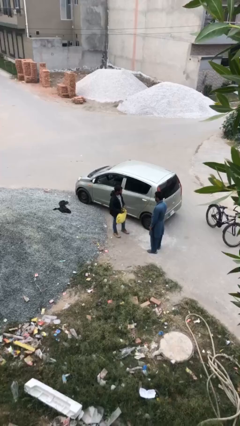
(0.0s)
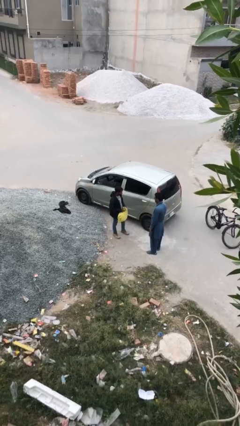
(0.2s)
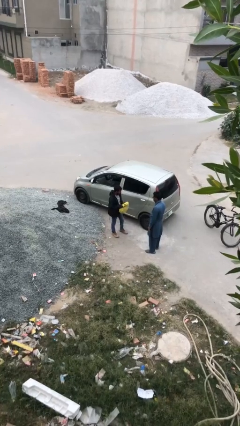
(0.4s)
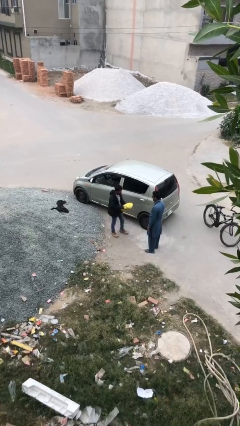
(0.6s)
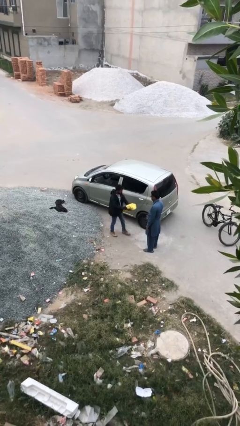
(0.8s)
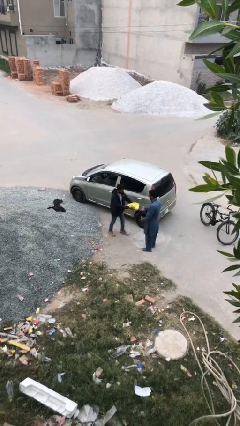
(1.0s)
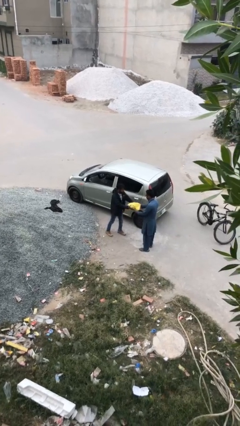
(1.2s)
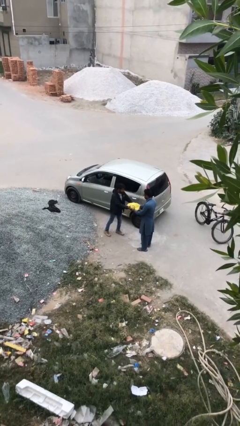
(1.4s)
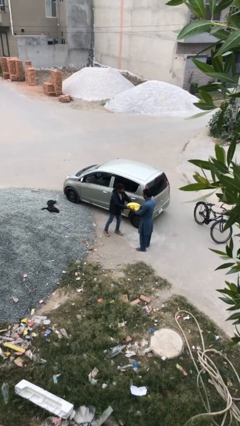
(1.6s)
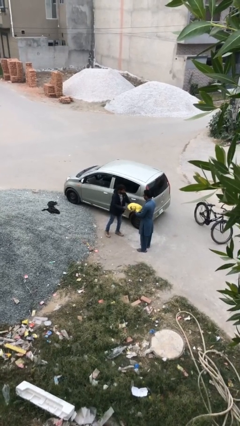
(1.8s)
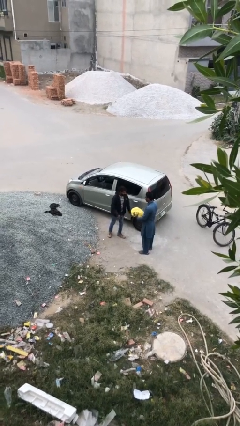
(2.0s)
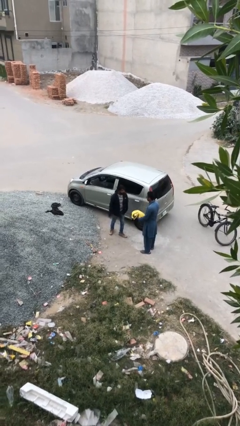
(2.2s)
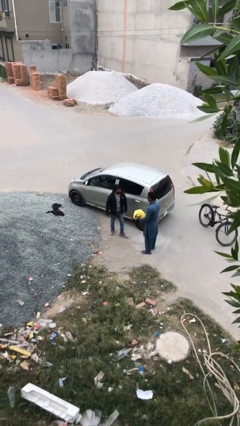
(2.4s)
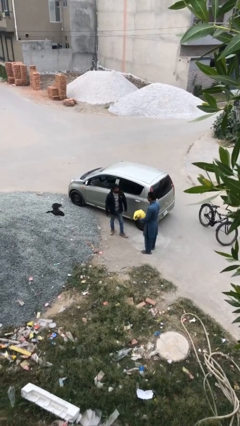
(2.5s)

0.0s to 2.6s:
person transfers object to person

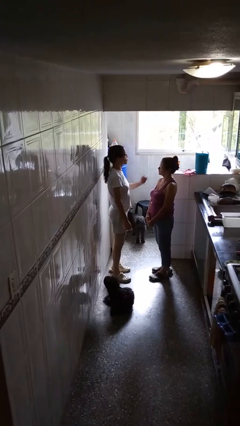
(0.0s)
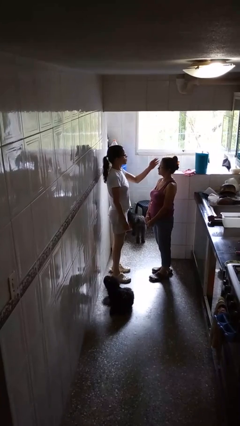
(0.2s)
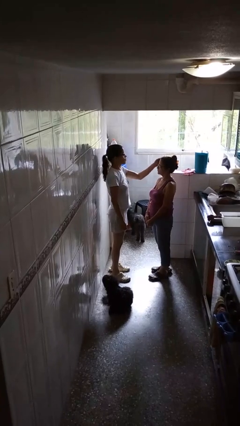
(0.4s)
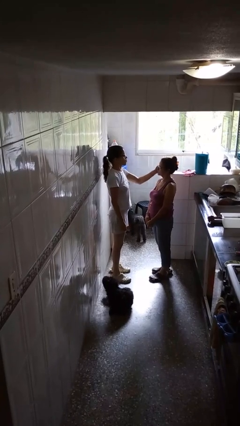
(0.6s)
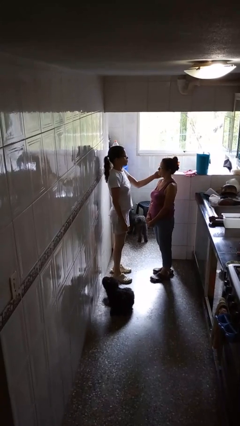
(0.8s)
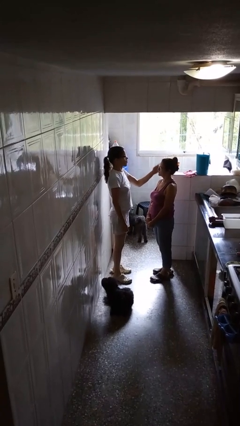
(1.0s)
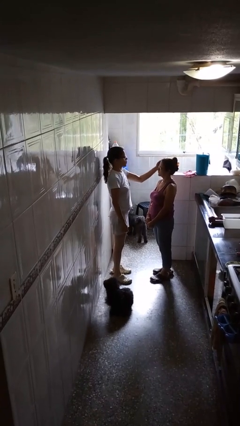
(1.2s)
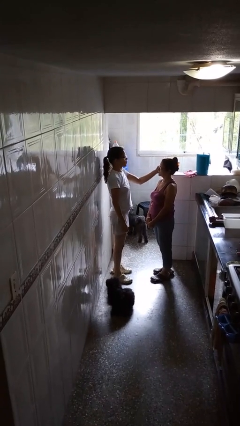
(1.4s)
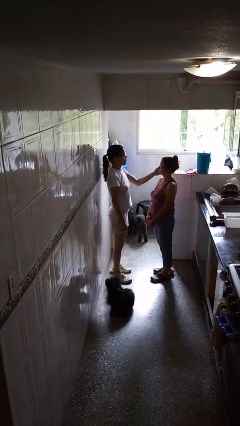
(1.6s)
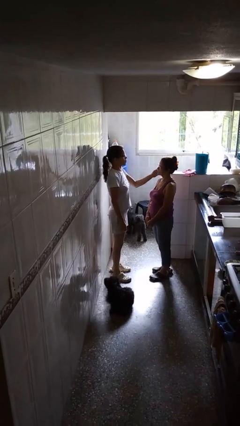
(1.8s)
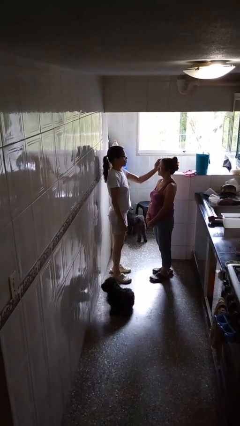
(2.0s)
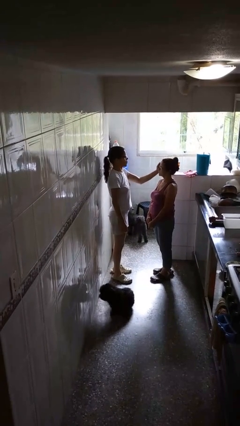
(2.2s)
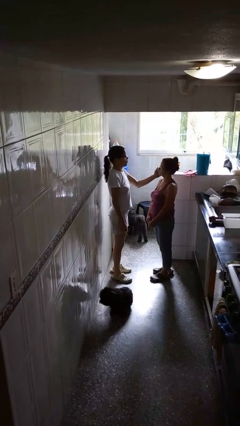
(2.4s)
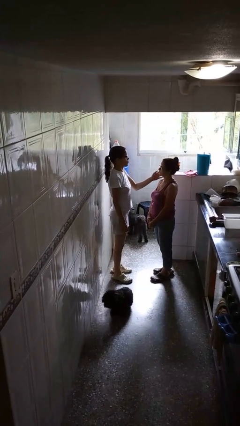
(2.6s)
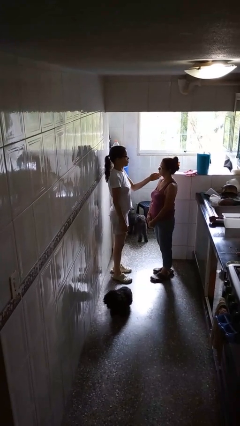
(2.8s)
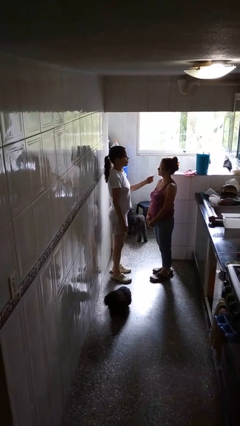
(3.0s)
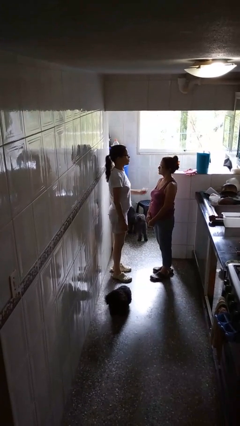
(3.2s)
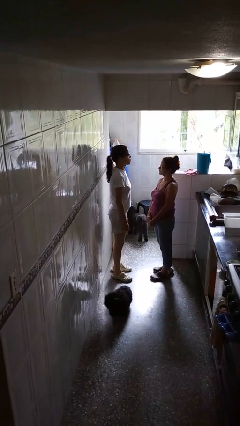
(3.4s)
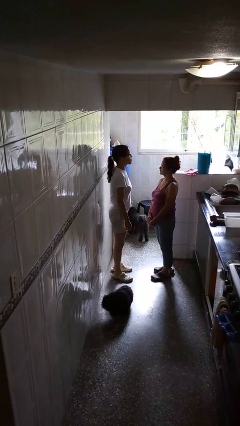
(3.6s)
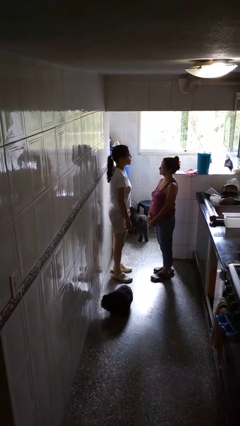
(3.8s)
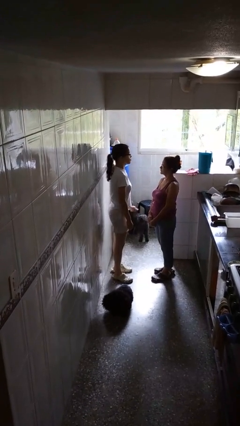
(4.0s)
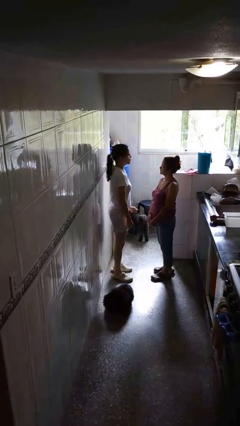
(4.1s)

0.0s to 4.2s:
person touches face of person

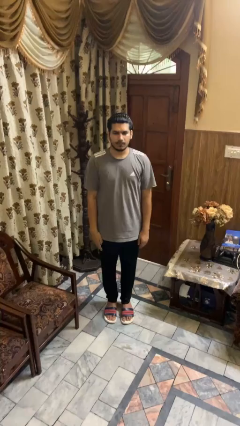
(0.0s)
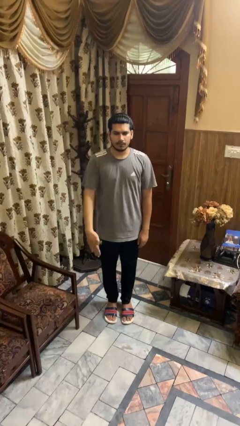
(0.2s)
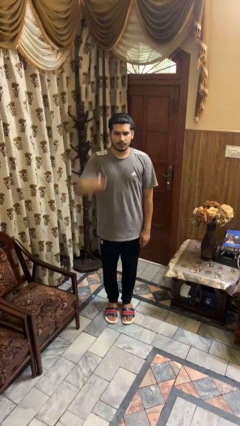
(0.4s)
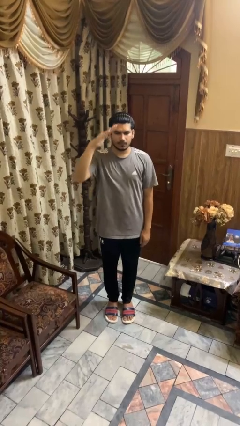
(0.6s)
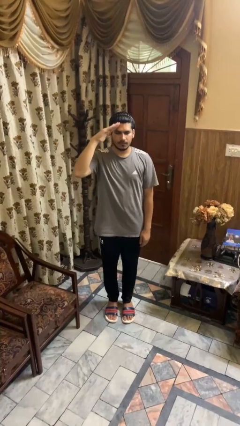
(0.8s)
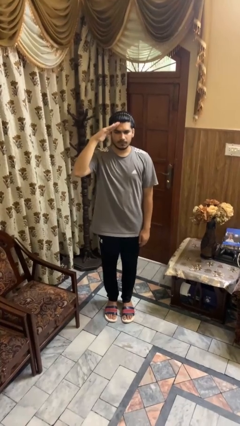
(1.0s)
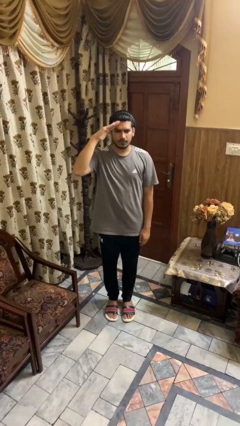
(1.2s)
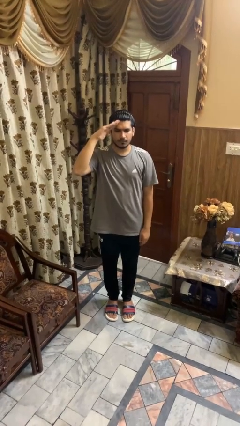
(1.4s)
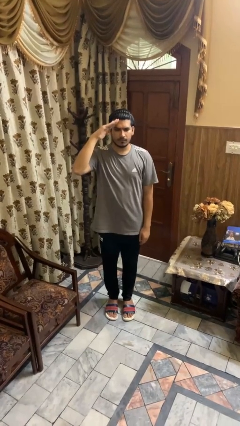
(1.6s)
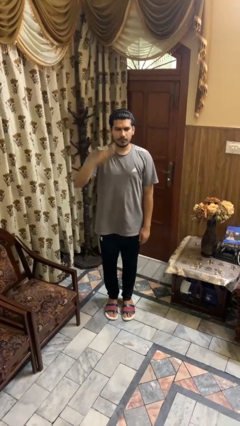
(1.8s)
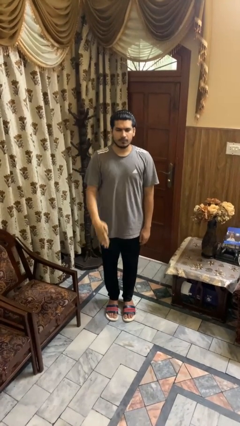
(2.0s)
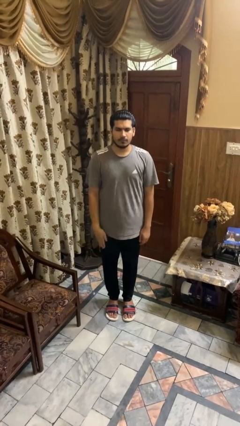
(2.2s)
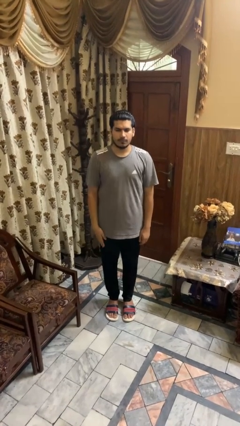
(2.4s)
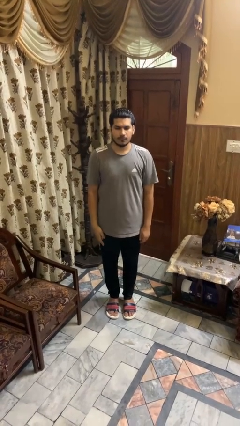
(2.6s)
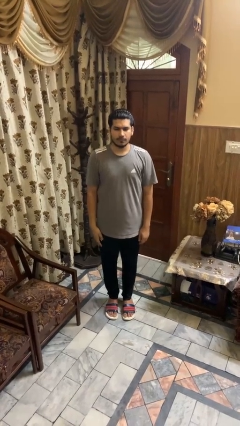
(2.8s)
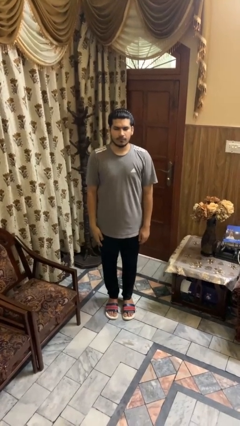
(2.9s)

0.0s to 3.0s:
person salutes

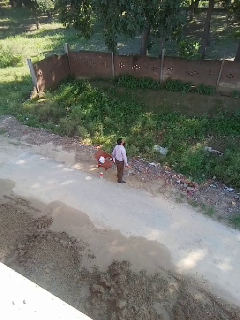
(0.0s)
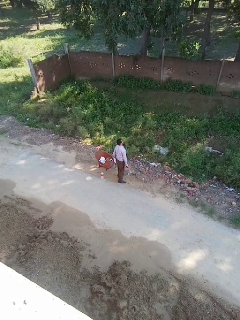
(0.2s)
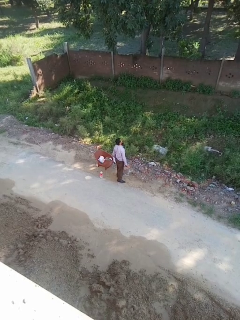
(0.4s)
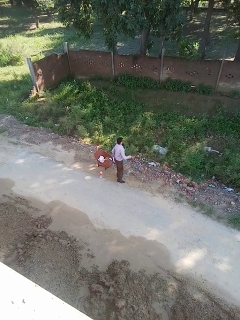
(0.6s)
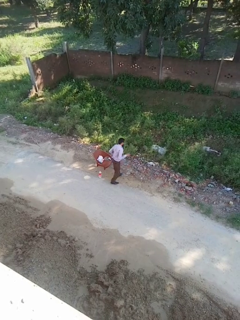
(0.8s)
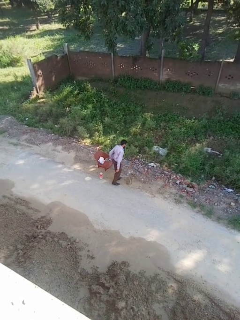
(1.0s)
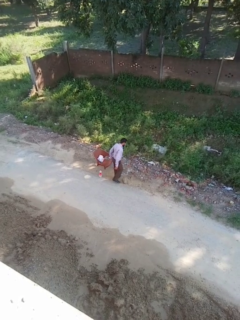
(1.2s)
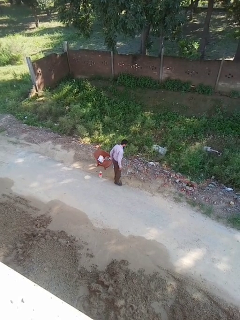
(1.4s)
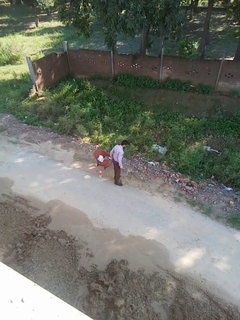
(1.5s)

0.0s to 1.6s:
person drops object

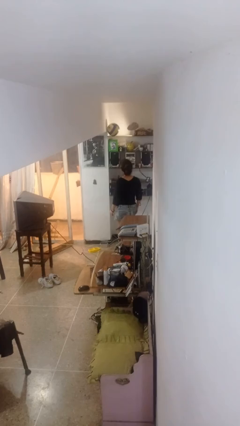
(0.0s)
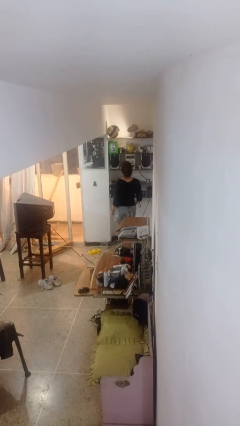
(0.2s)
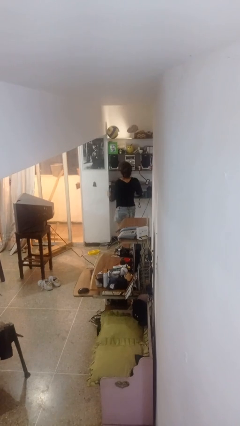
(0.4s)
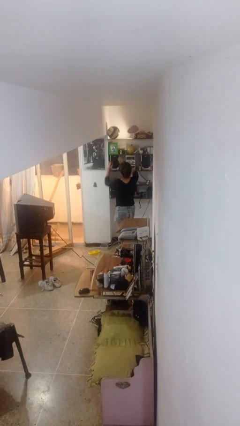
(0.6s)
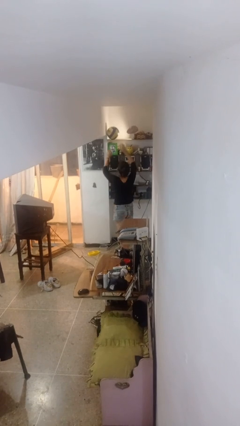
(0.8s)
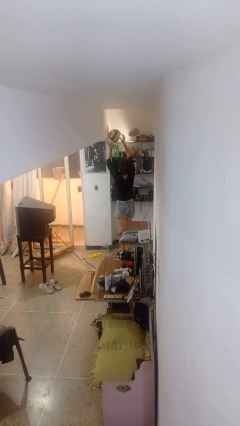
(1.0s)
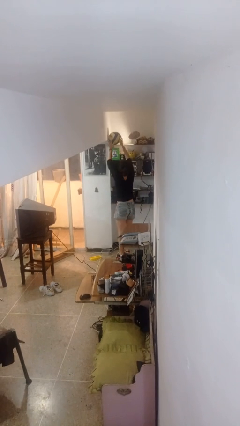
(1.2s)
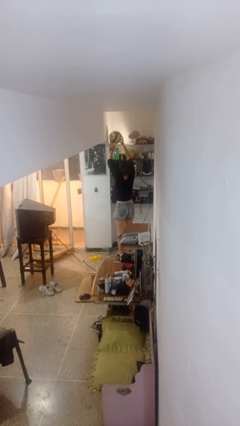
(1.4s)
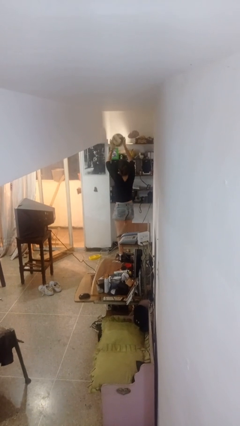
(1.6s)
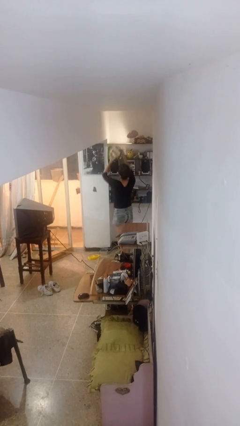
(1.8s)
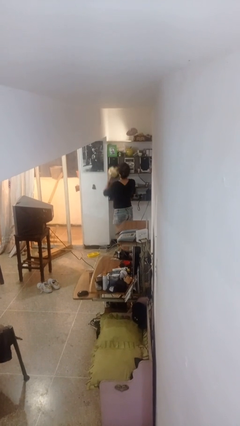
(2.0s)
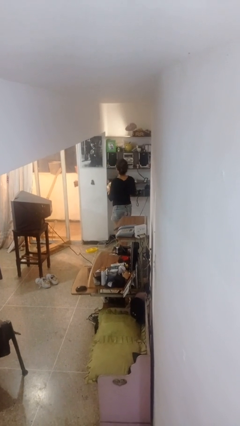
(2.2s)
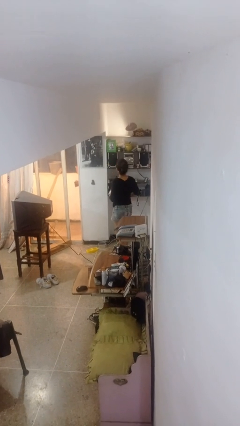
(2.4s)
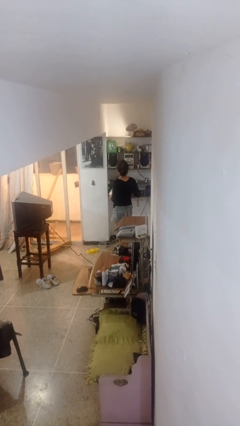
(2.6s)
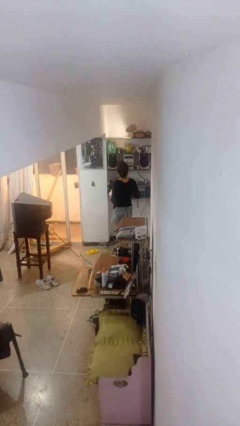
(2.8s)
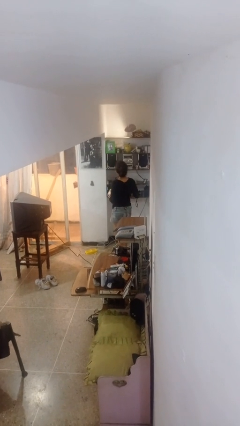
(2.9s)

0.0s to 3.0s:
person picks up object from shelf

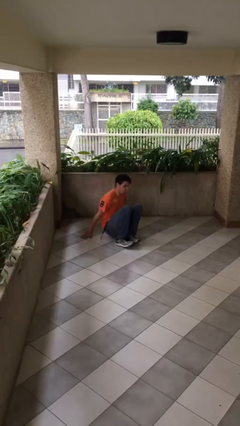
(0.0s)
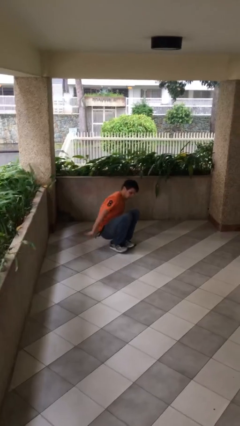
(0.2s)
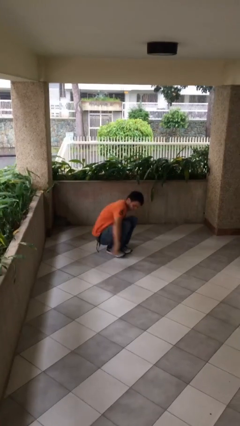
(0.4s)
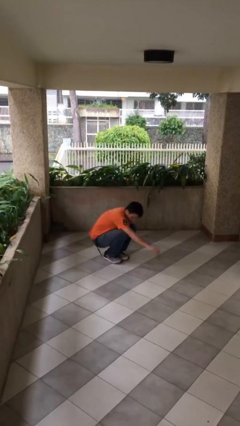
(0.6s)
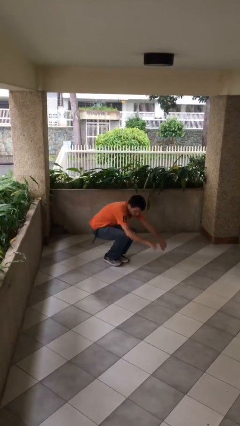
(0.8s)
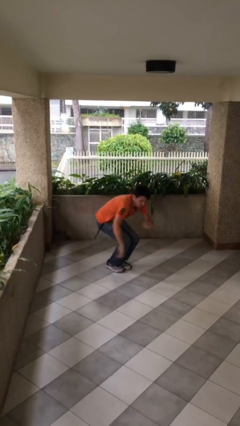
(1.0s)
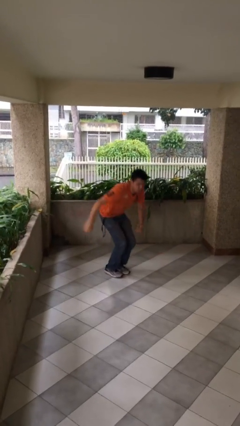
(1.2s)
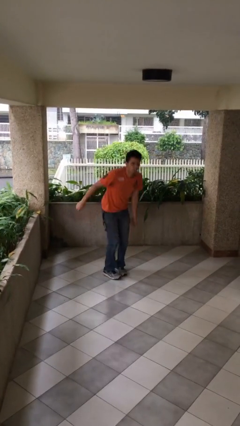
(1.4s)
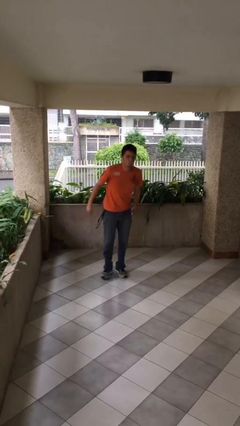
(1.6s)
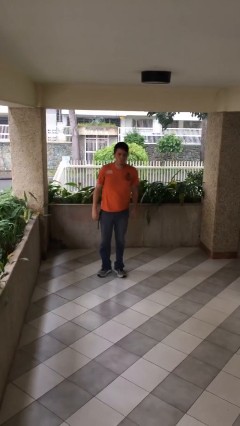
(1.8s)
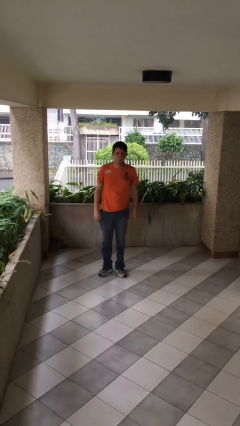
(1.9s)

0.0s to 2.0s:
person stands up

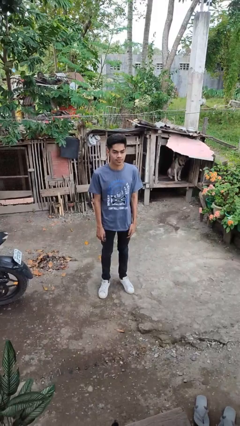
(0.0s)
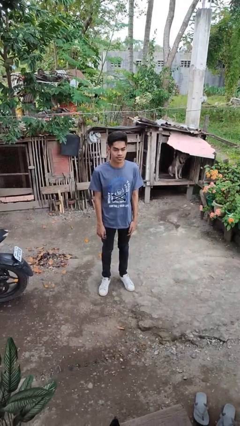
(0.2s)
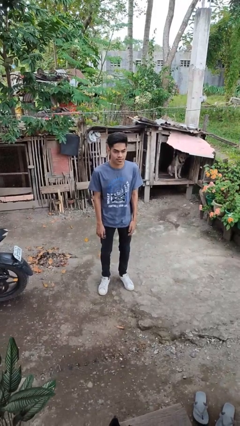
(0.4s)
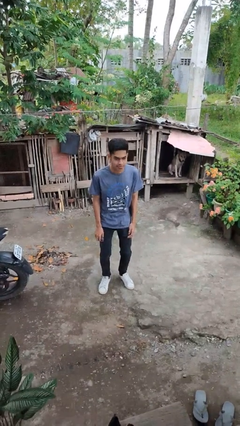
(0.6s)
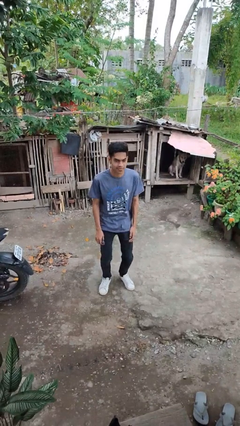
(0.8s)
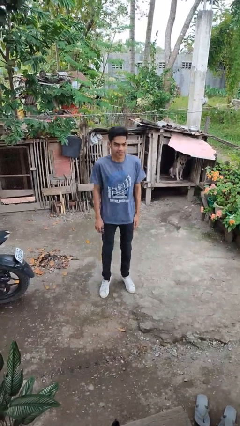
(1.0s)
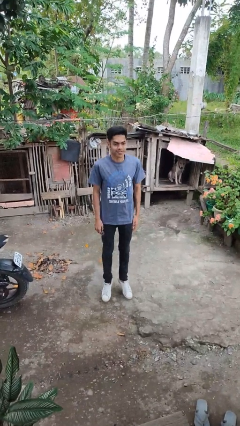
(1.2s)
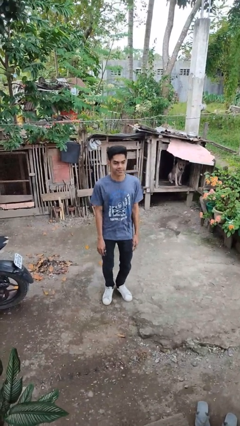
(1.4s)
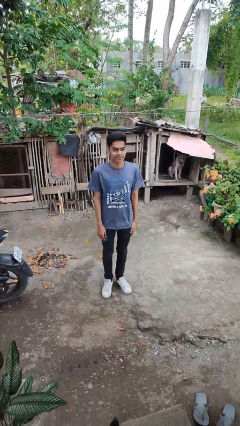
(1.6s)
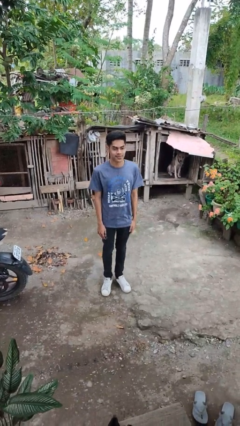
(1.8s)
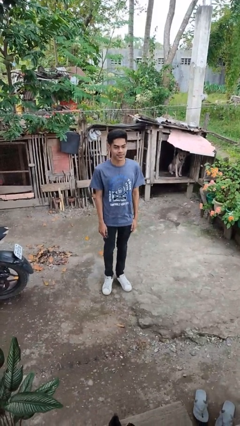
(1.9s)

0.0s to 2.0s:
person jumps
